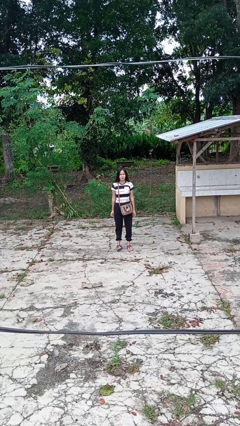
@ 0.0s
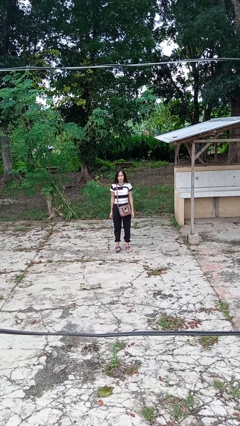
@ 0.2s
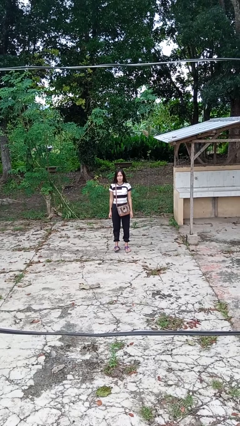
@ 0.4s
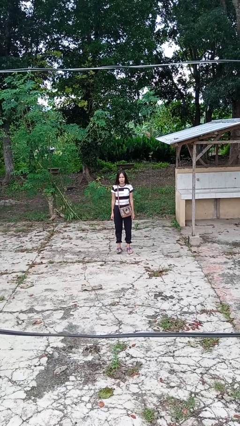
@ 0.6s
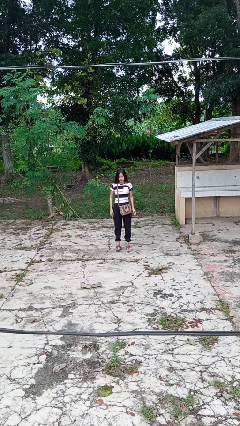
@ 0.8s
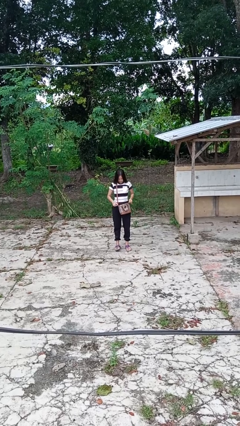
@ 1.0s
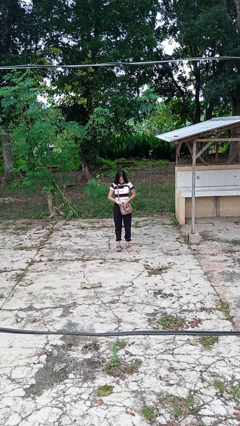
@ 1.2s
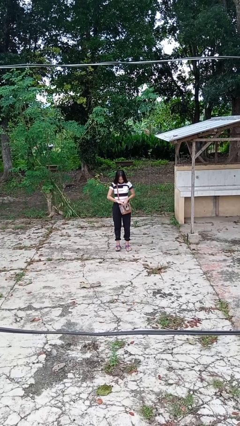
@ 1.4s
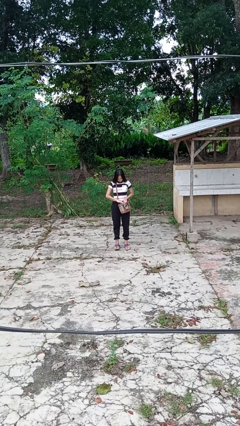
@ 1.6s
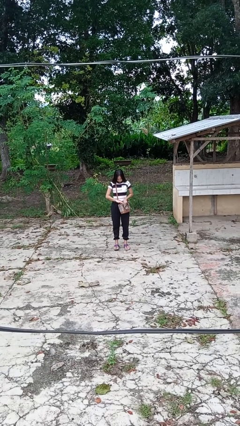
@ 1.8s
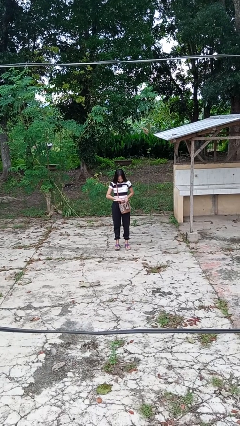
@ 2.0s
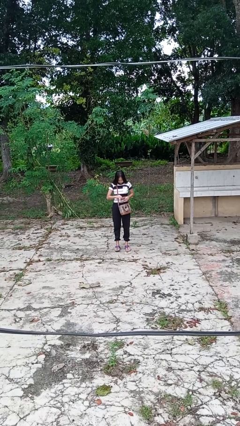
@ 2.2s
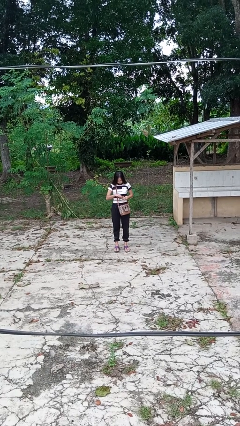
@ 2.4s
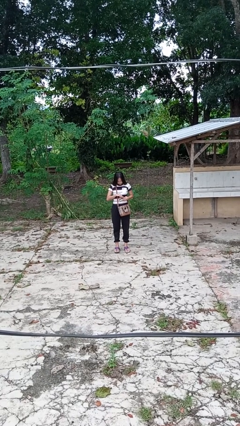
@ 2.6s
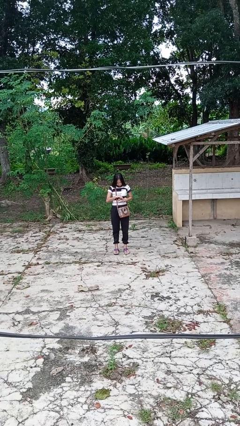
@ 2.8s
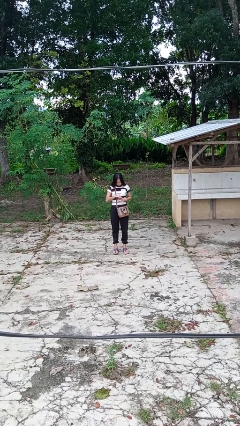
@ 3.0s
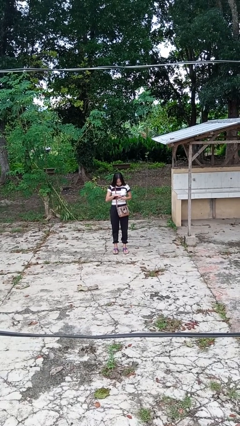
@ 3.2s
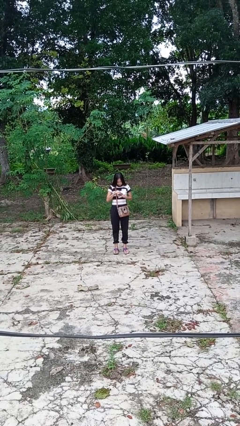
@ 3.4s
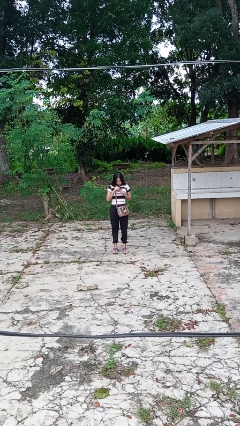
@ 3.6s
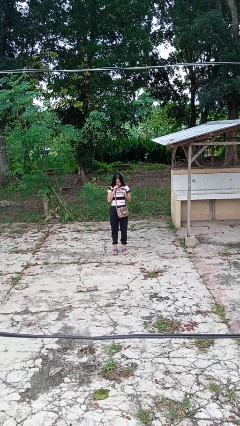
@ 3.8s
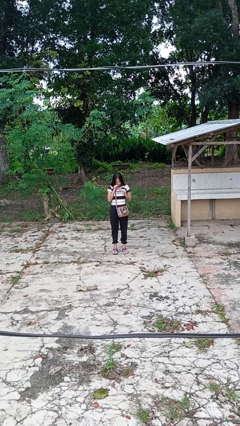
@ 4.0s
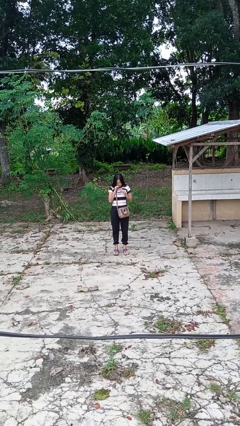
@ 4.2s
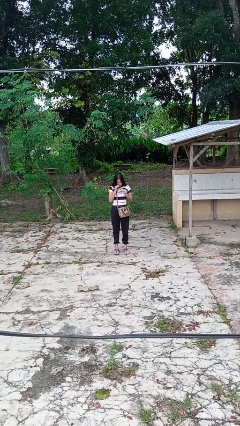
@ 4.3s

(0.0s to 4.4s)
person eats snack from bag

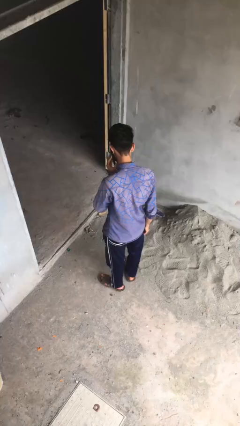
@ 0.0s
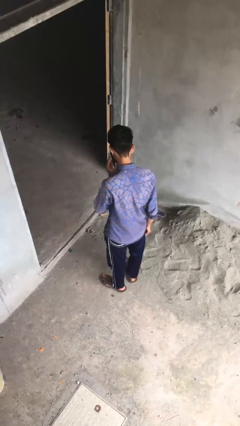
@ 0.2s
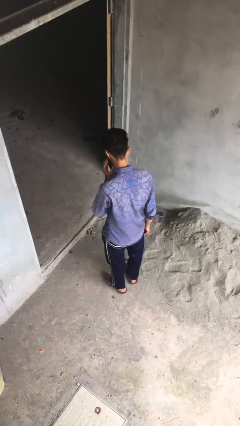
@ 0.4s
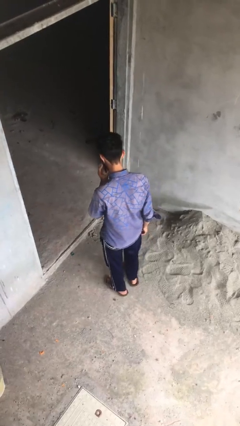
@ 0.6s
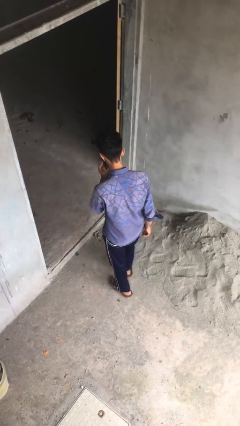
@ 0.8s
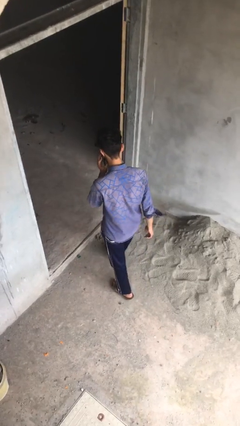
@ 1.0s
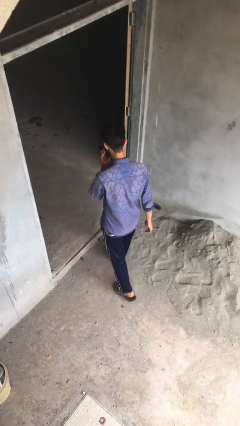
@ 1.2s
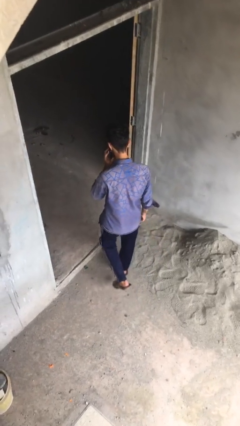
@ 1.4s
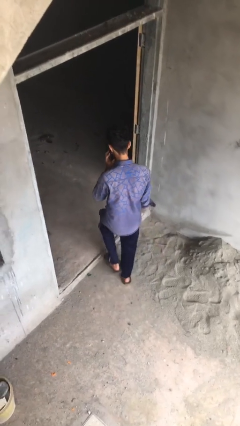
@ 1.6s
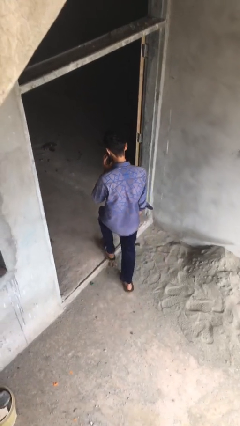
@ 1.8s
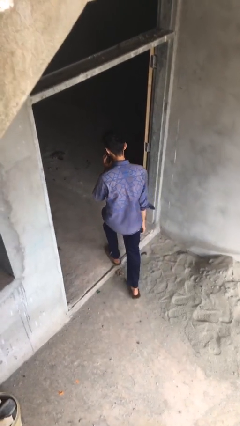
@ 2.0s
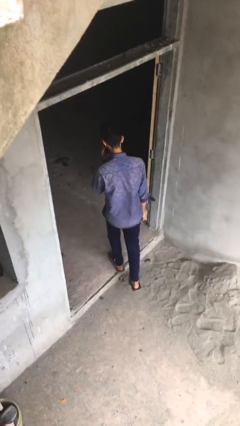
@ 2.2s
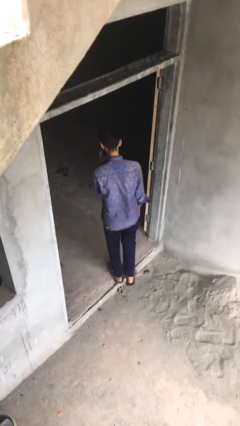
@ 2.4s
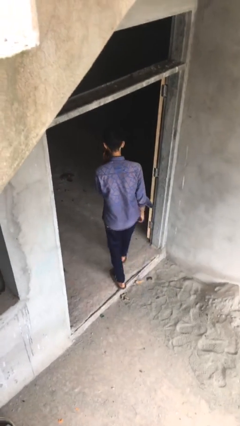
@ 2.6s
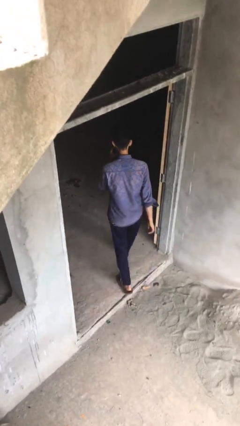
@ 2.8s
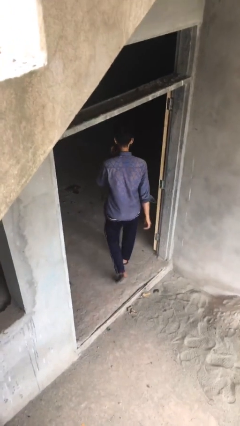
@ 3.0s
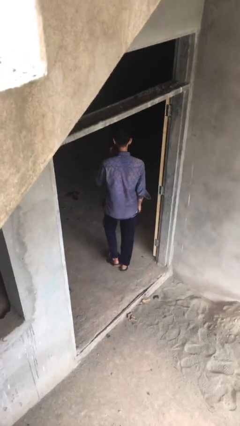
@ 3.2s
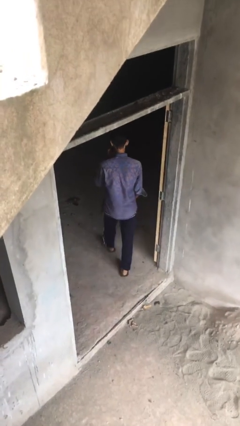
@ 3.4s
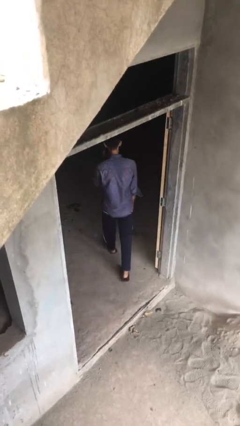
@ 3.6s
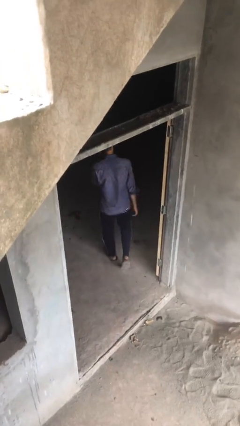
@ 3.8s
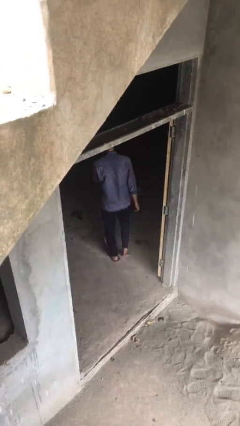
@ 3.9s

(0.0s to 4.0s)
person exits scene through structure

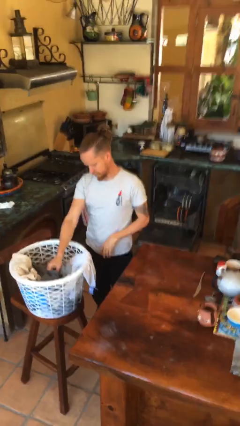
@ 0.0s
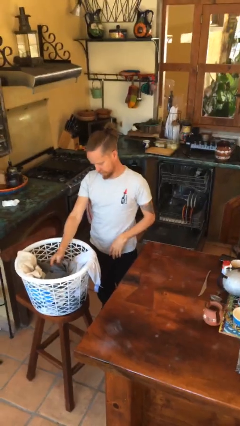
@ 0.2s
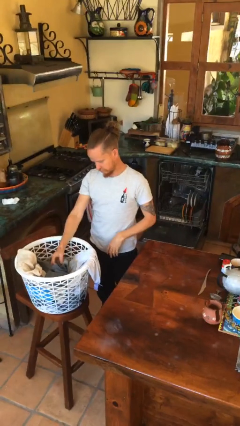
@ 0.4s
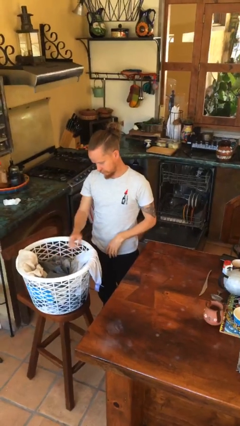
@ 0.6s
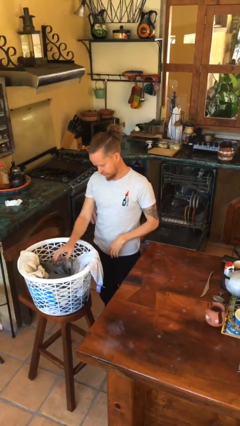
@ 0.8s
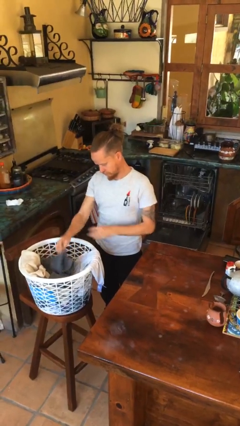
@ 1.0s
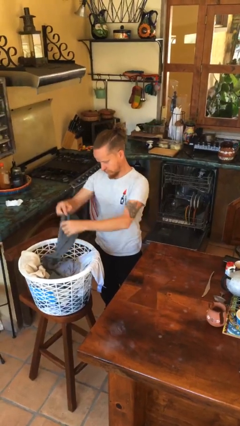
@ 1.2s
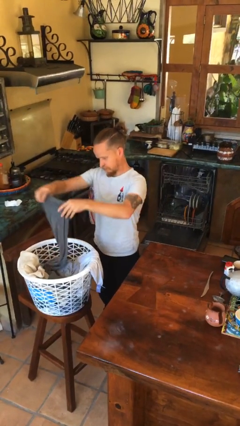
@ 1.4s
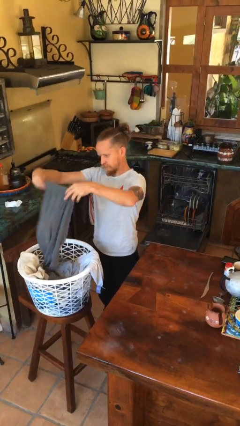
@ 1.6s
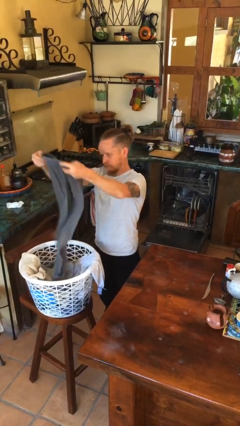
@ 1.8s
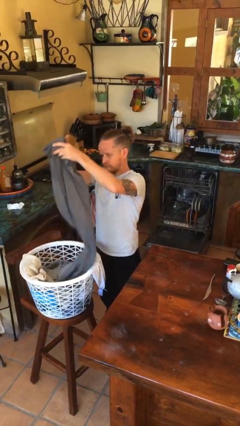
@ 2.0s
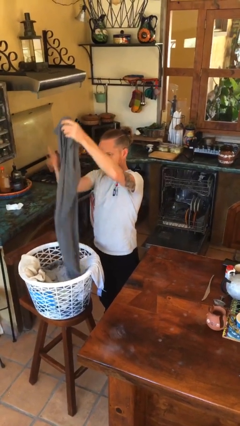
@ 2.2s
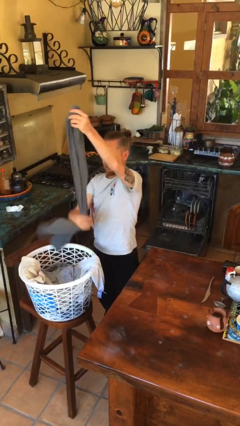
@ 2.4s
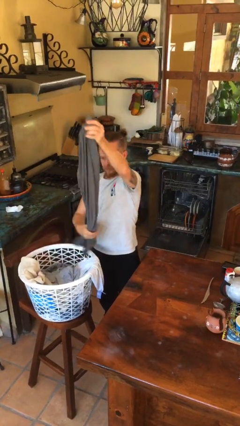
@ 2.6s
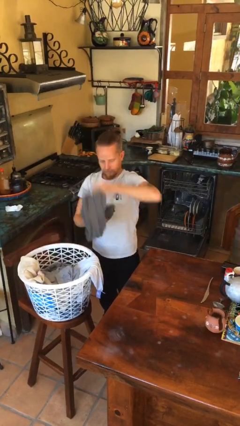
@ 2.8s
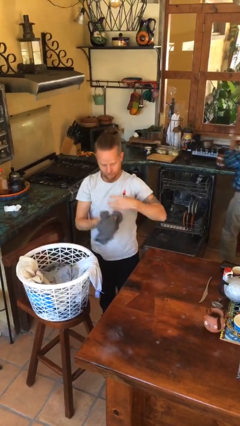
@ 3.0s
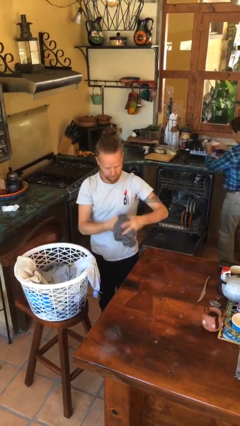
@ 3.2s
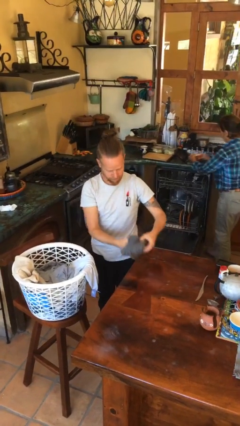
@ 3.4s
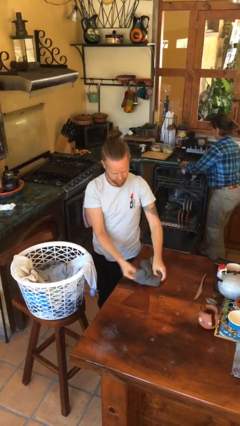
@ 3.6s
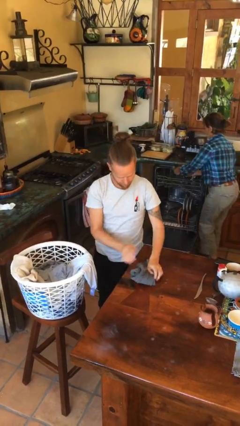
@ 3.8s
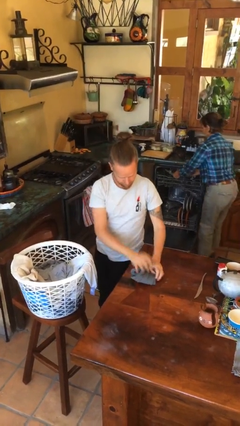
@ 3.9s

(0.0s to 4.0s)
person folds pants

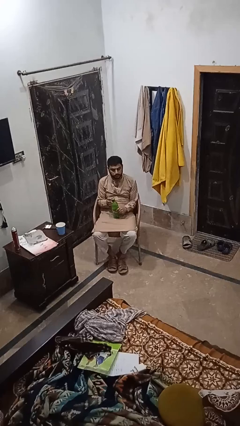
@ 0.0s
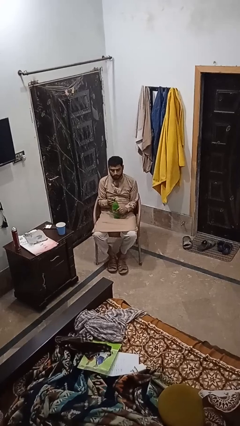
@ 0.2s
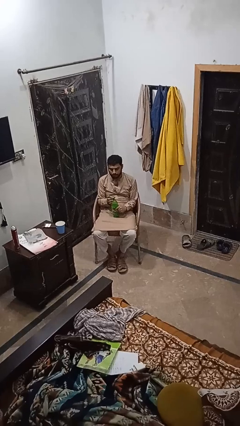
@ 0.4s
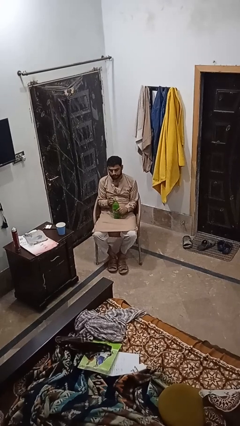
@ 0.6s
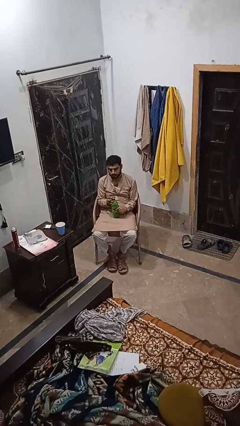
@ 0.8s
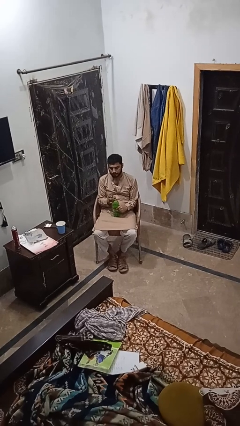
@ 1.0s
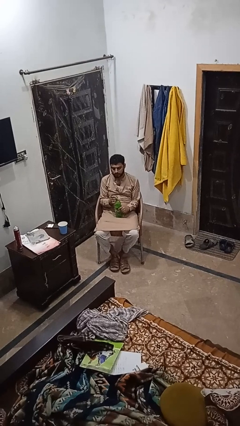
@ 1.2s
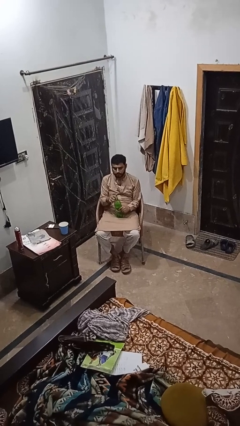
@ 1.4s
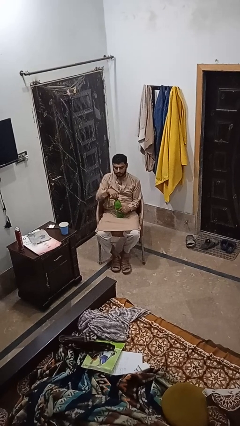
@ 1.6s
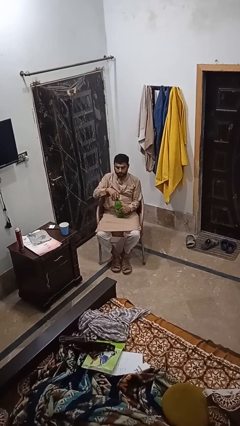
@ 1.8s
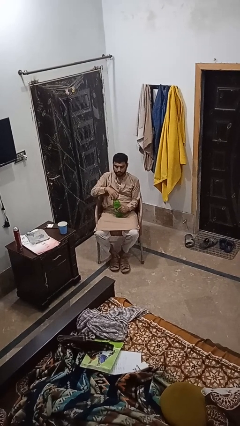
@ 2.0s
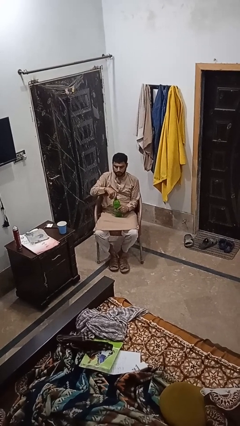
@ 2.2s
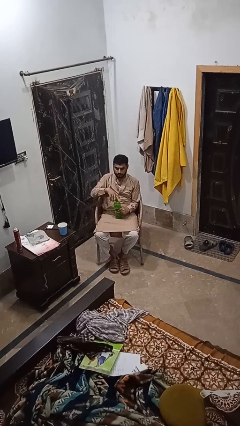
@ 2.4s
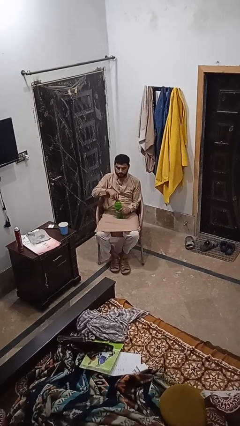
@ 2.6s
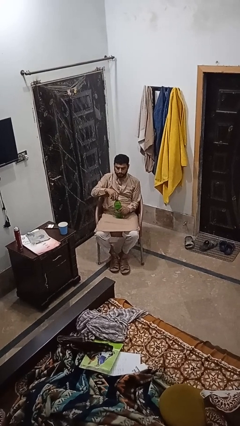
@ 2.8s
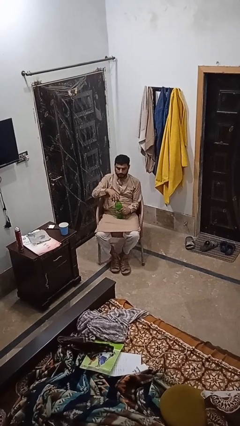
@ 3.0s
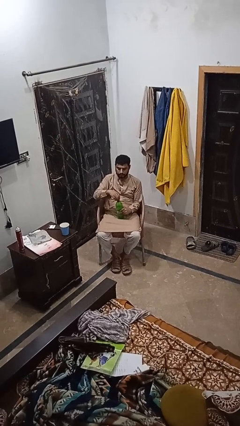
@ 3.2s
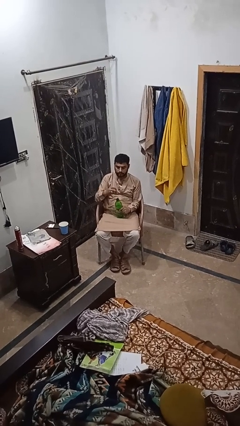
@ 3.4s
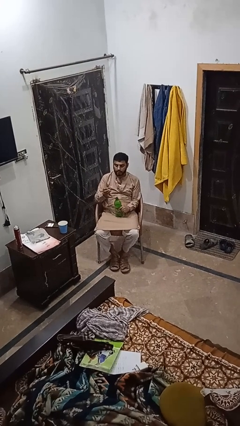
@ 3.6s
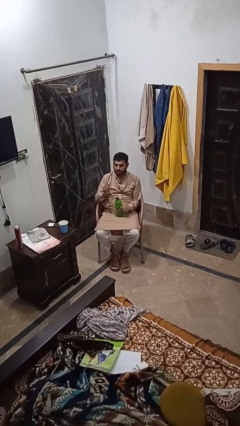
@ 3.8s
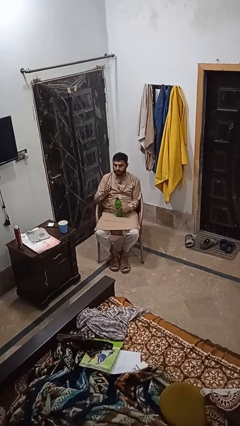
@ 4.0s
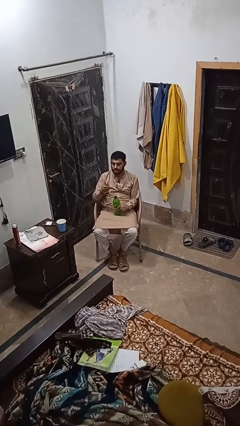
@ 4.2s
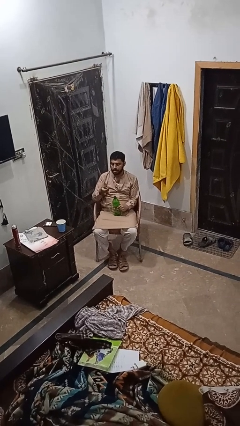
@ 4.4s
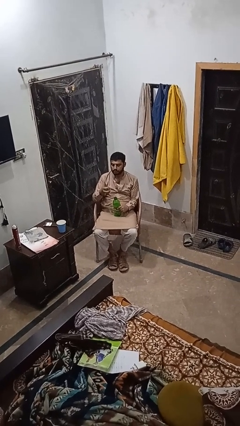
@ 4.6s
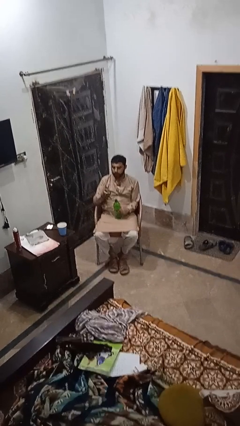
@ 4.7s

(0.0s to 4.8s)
person unscrews lid from bottle

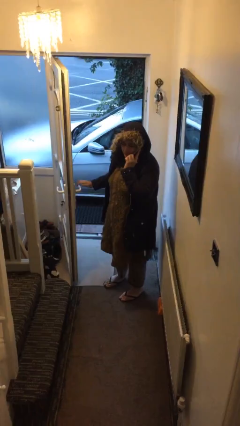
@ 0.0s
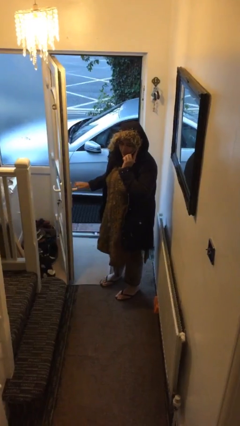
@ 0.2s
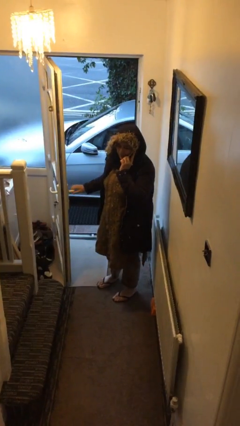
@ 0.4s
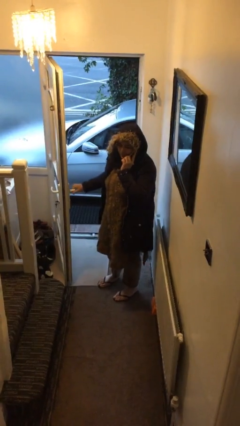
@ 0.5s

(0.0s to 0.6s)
person closes facility door
